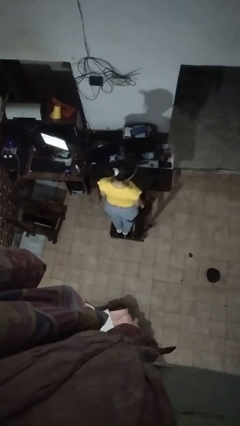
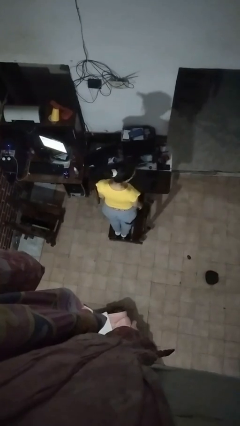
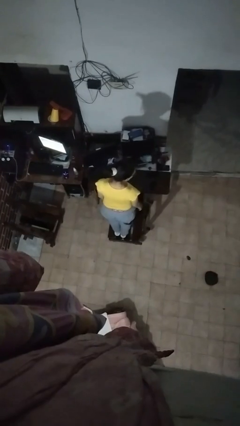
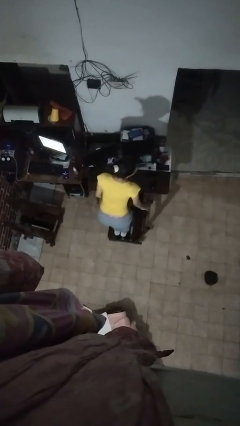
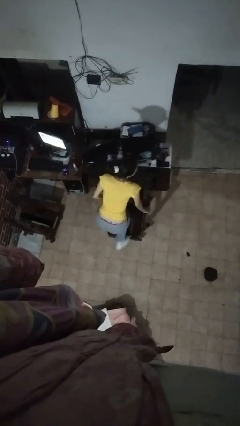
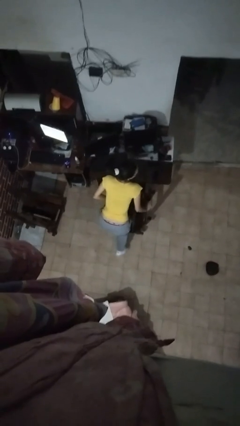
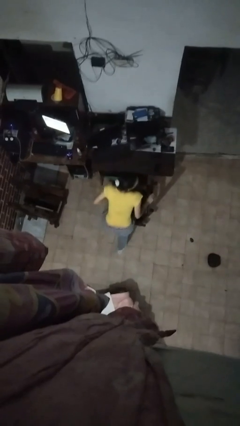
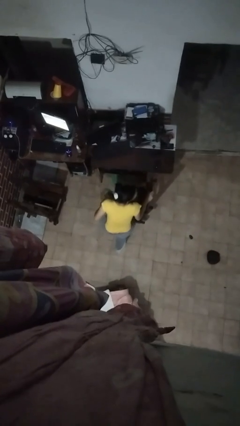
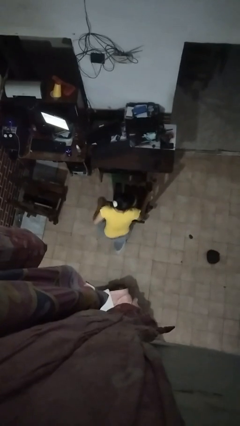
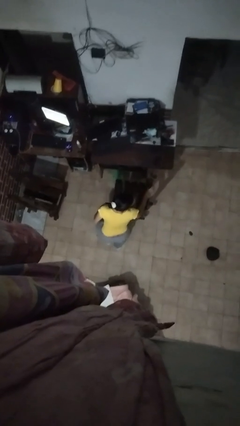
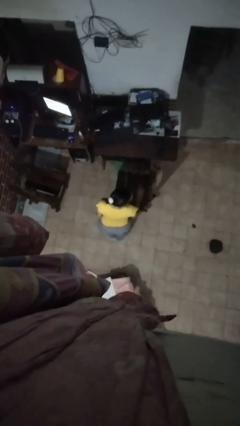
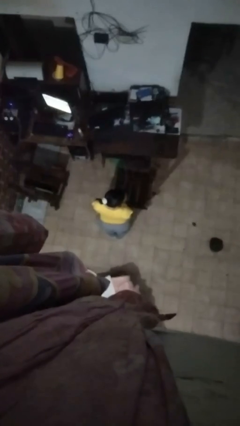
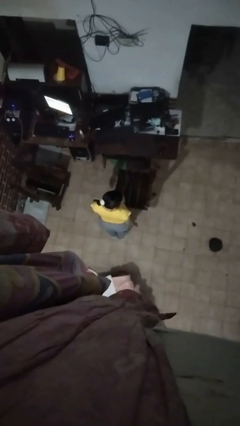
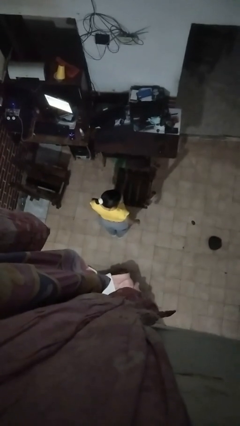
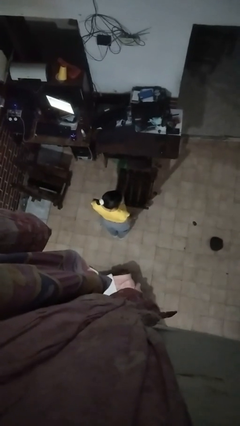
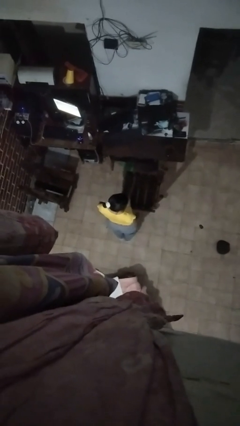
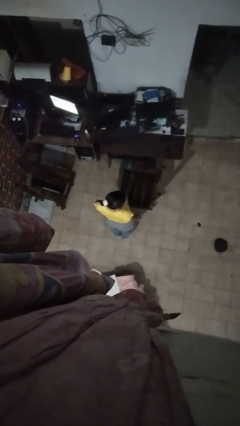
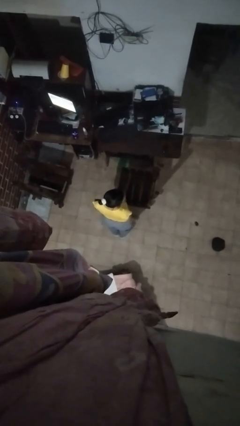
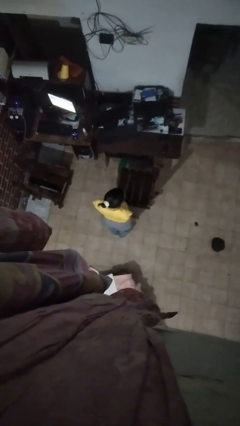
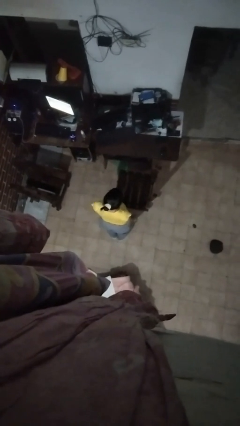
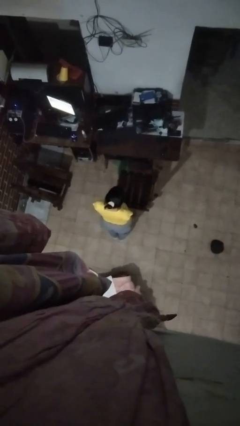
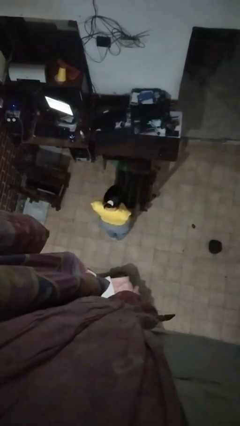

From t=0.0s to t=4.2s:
person climbs off chair

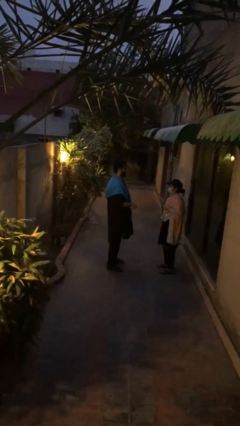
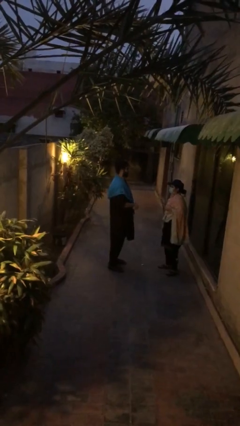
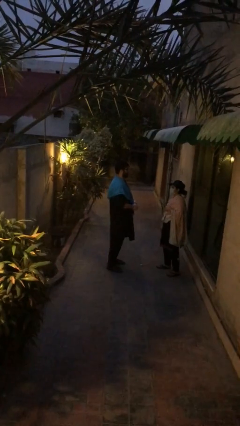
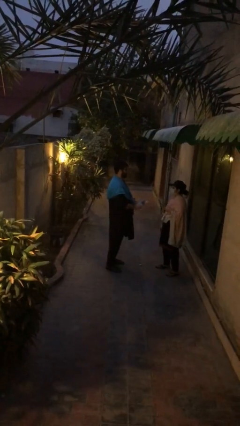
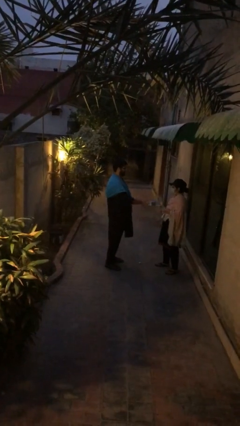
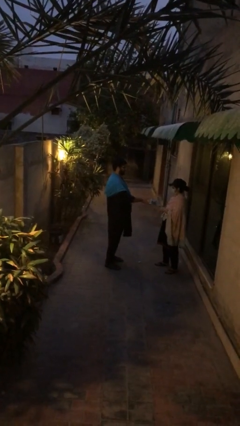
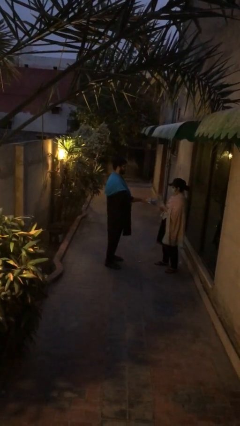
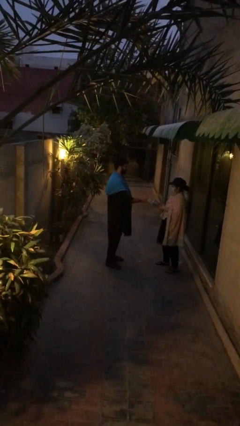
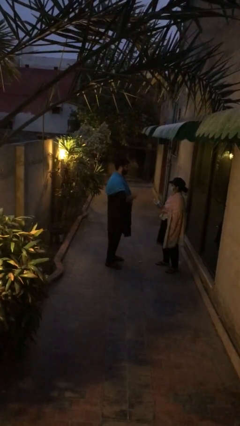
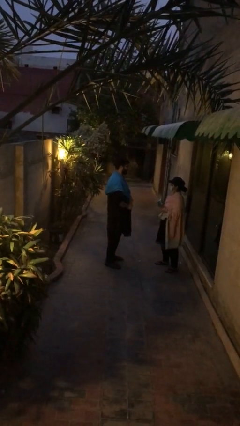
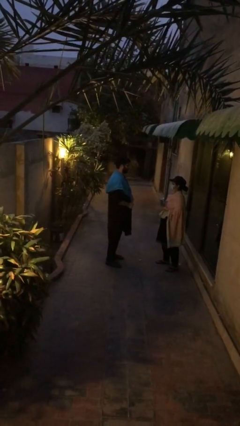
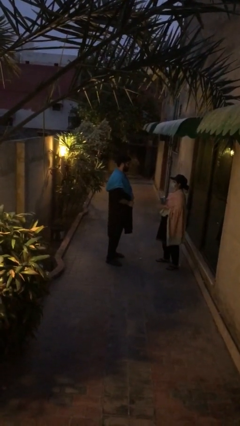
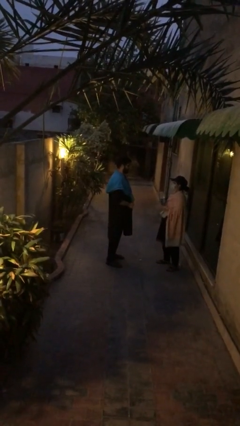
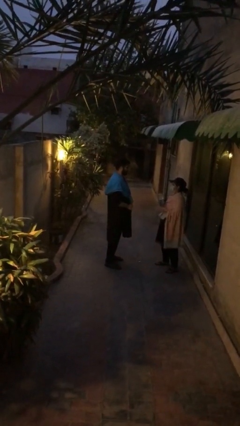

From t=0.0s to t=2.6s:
person transfers object to person

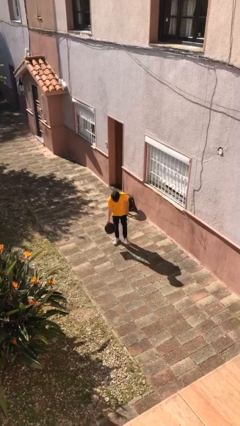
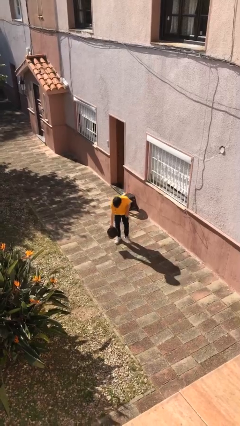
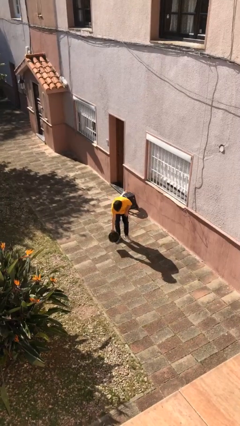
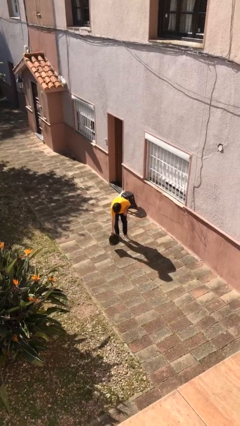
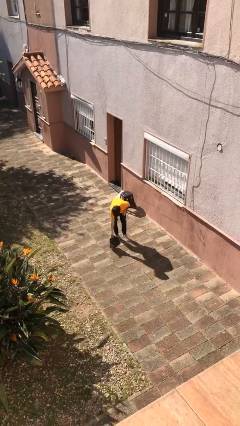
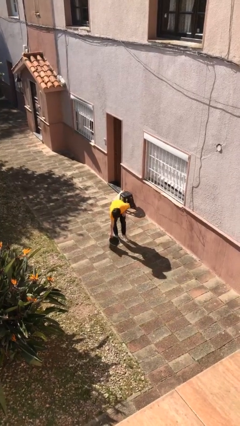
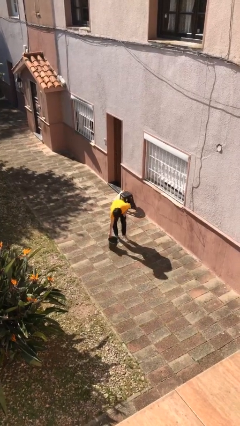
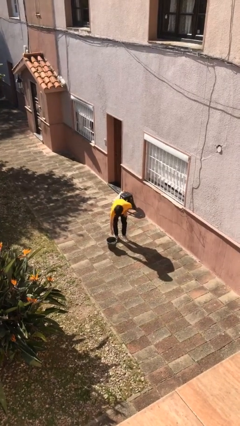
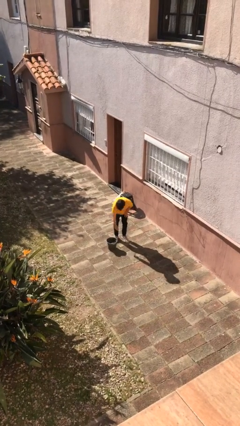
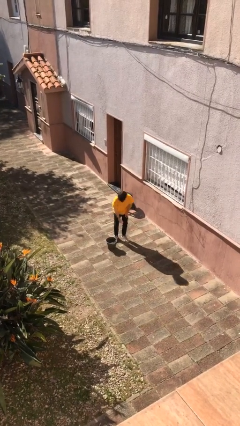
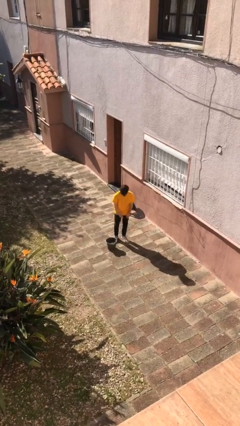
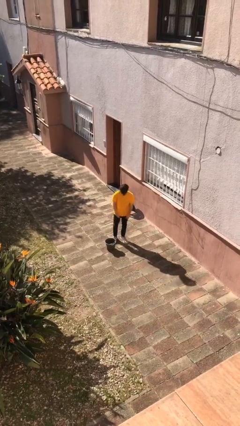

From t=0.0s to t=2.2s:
person puts down object on floor

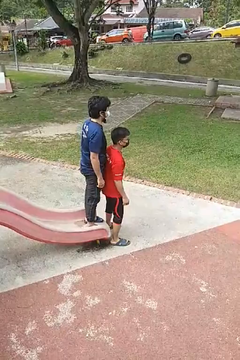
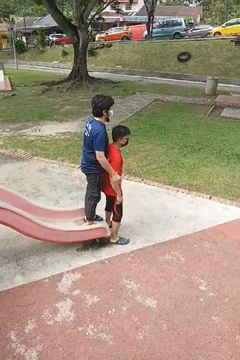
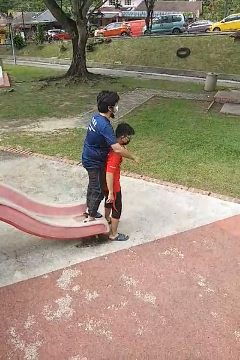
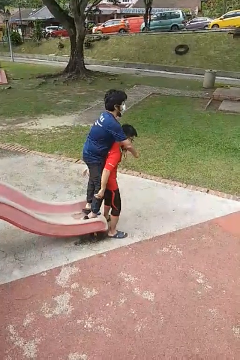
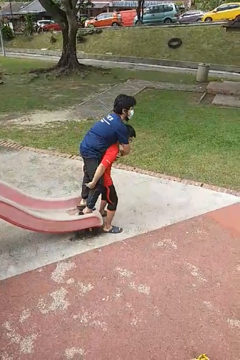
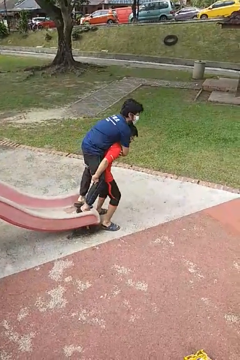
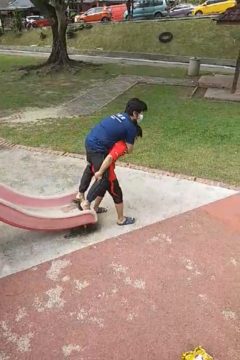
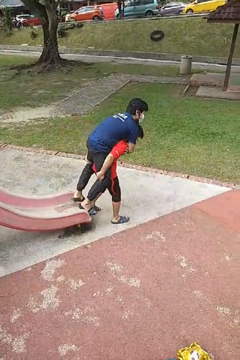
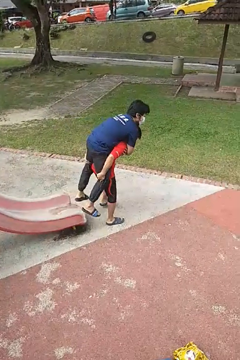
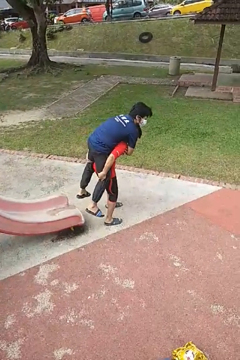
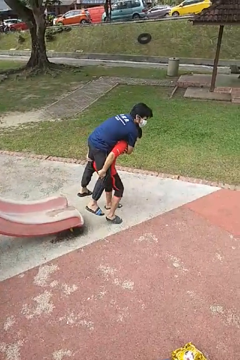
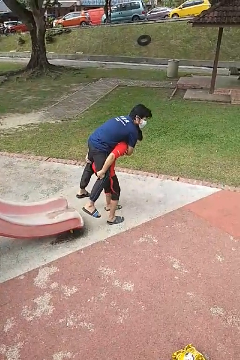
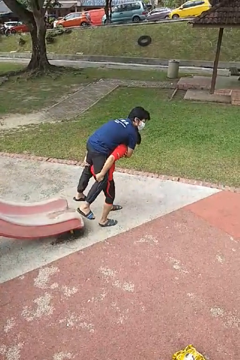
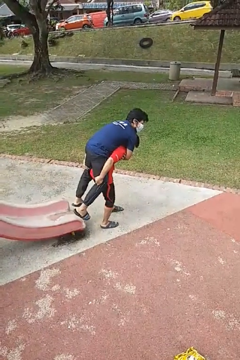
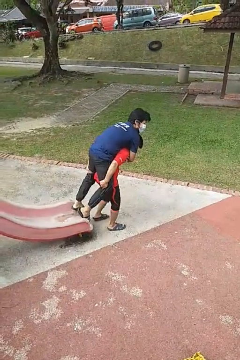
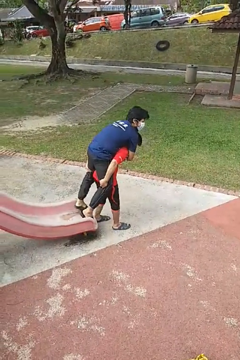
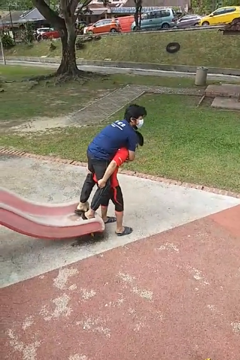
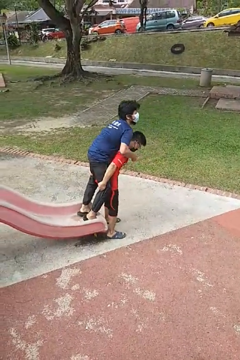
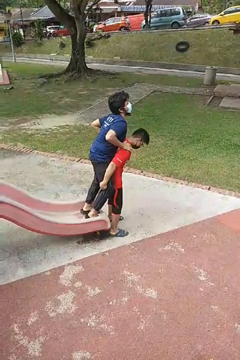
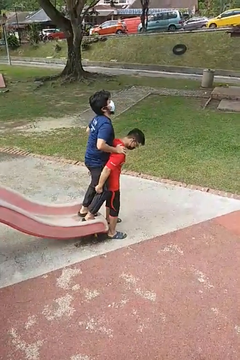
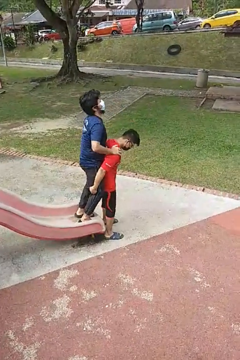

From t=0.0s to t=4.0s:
person carries person on back

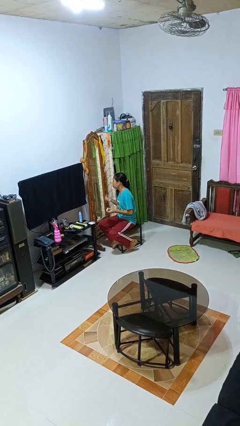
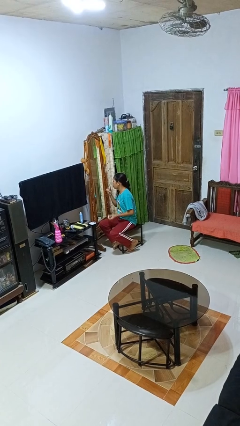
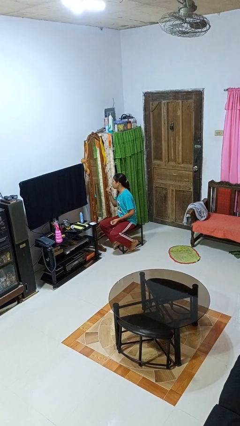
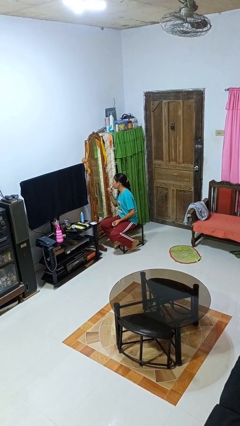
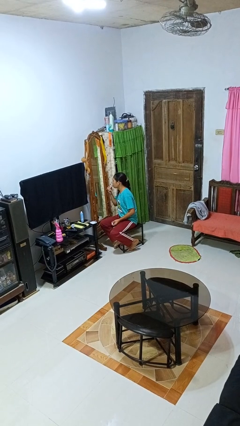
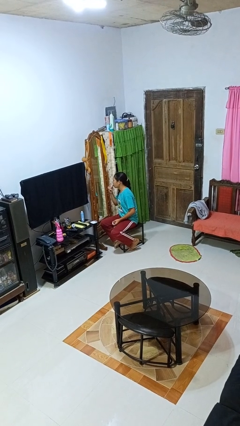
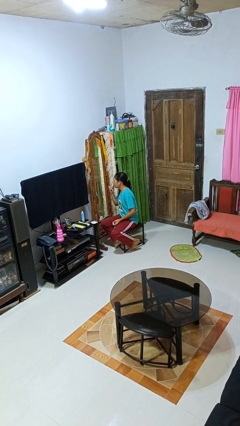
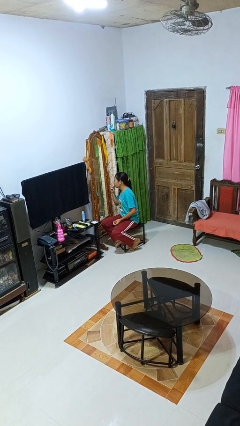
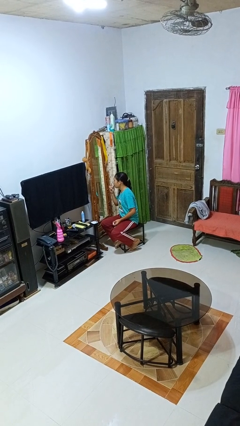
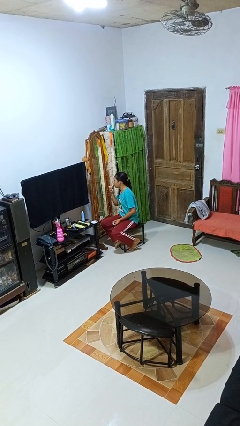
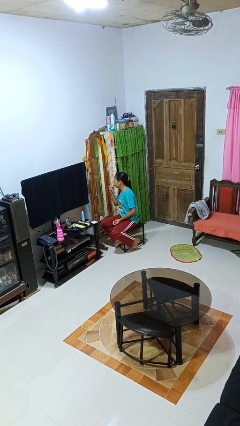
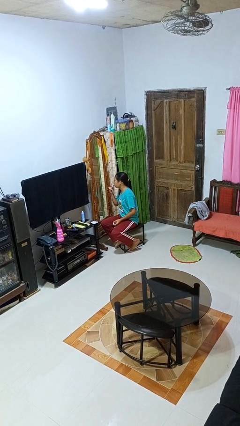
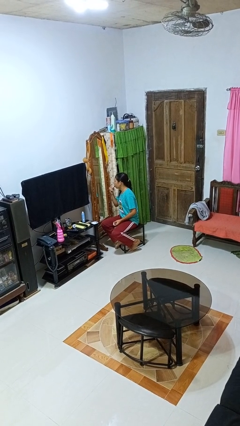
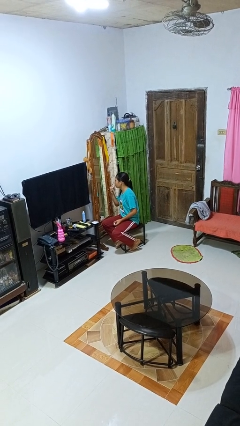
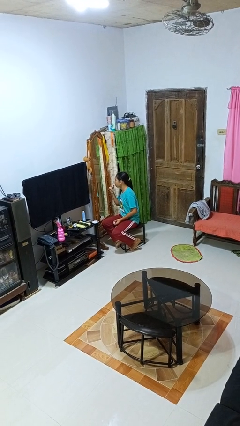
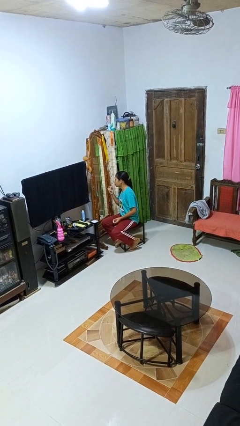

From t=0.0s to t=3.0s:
person applies lip makeup

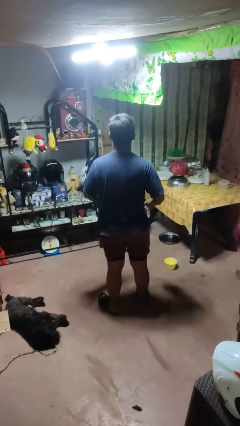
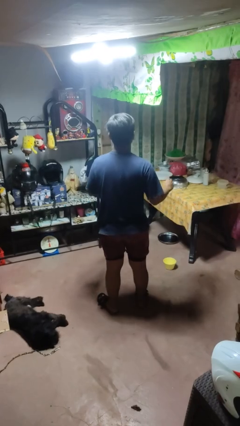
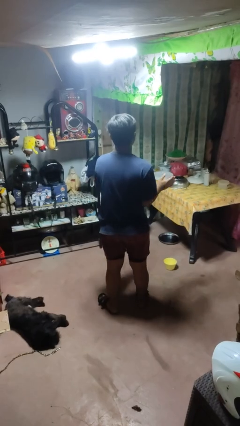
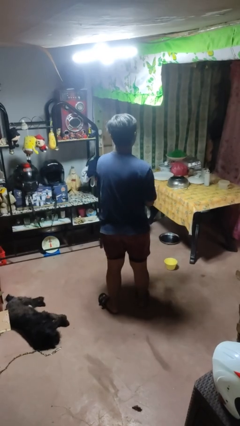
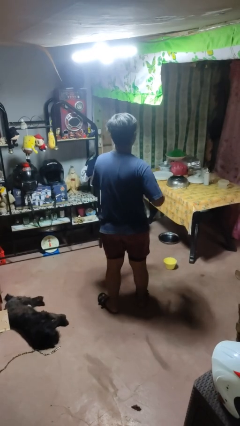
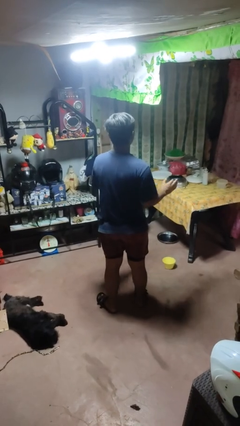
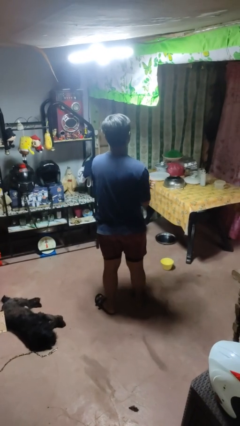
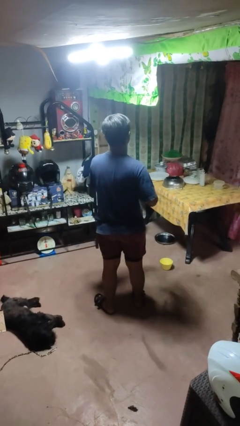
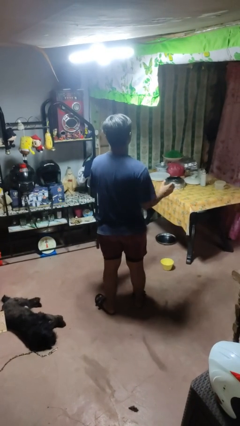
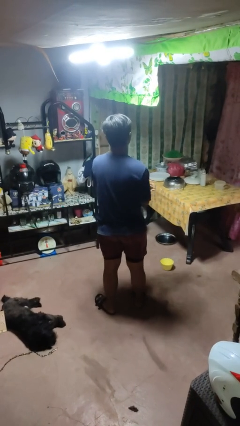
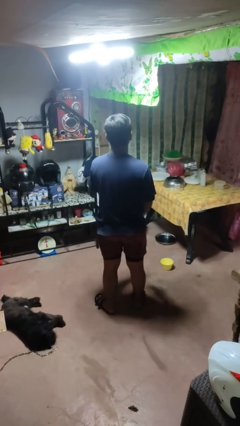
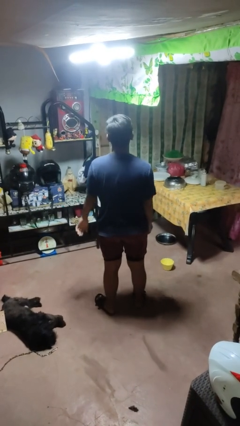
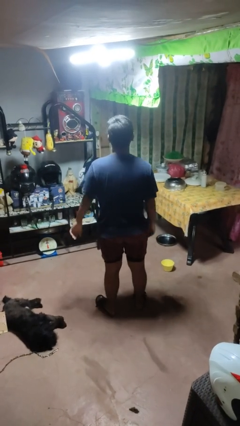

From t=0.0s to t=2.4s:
person claps hands
